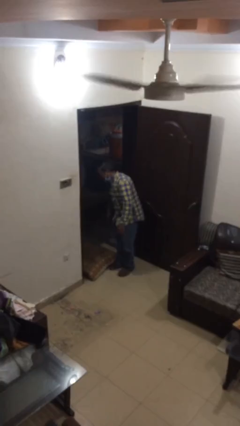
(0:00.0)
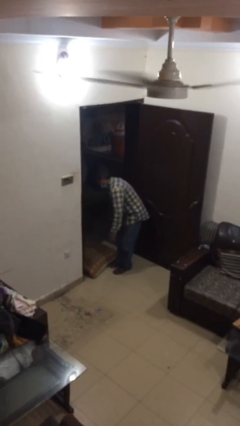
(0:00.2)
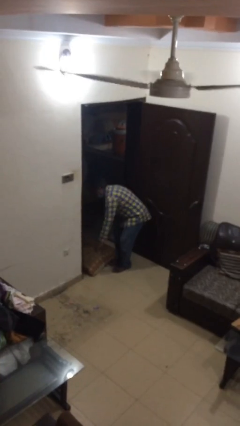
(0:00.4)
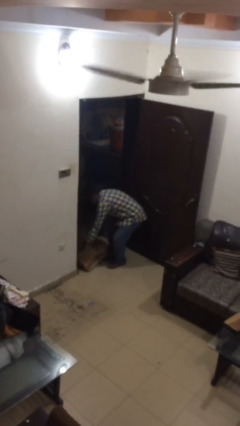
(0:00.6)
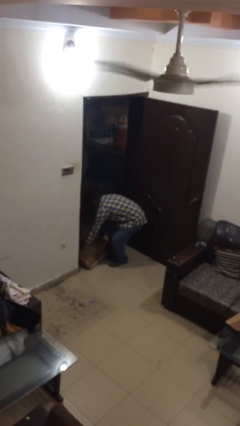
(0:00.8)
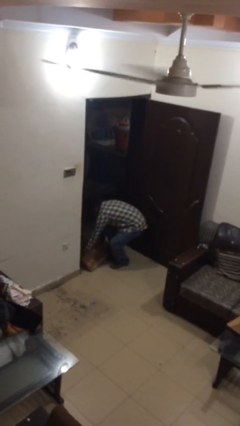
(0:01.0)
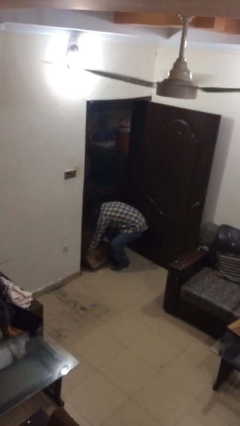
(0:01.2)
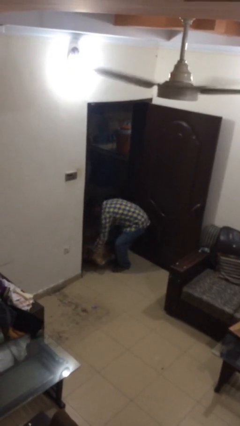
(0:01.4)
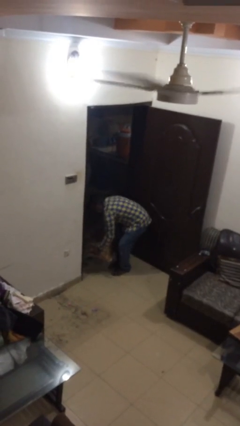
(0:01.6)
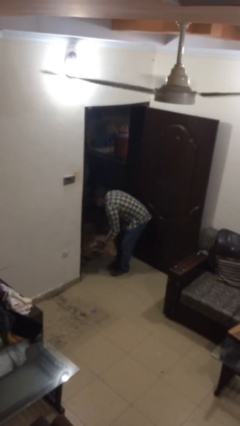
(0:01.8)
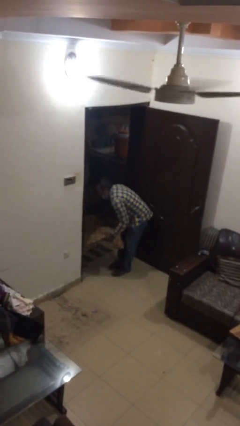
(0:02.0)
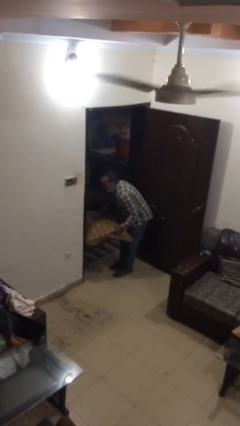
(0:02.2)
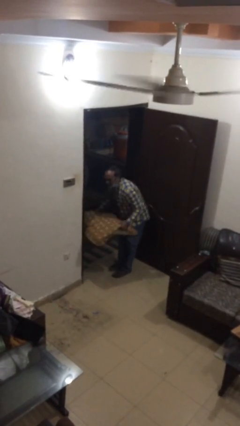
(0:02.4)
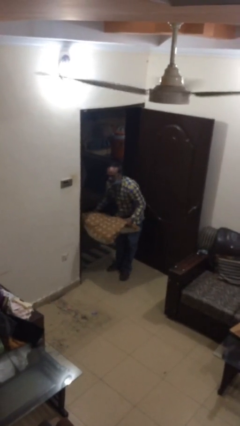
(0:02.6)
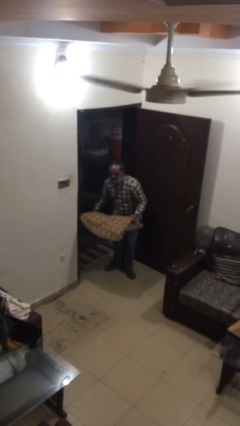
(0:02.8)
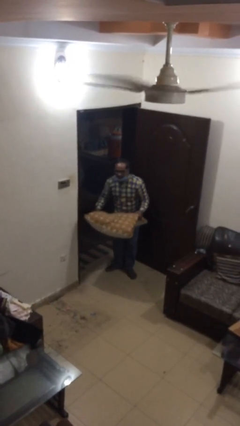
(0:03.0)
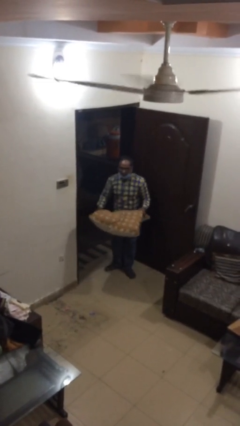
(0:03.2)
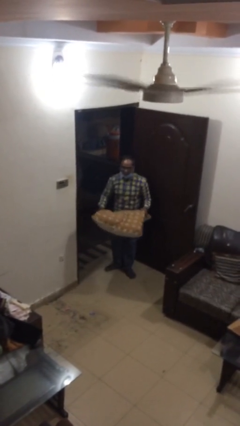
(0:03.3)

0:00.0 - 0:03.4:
person picks up object from floor

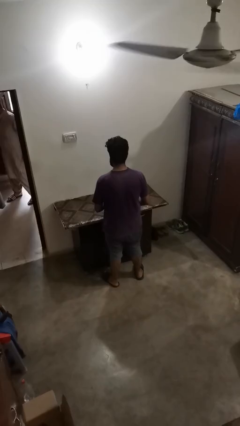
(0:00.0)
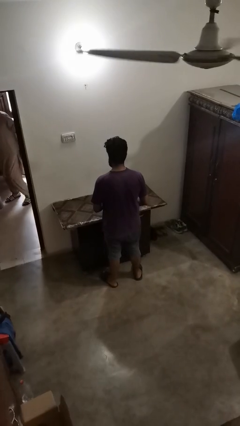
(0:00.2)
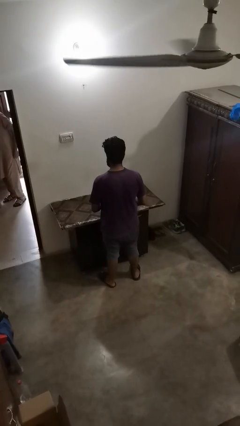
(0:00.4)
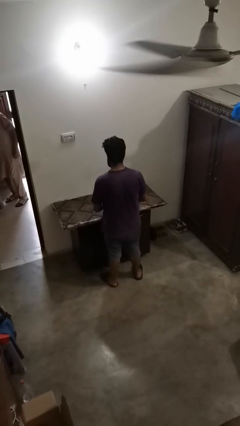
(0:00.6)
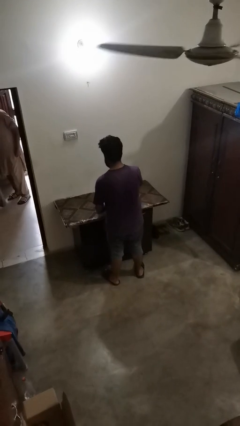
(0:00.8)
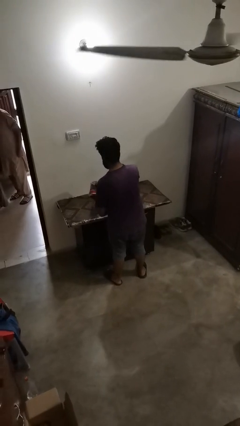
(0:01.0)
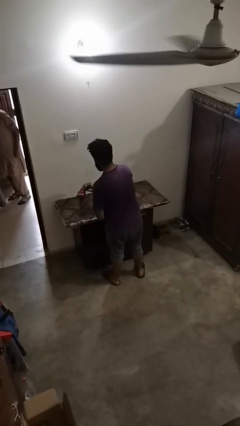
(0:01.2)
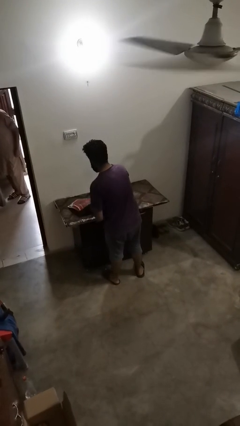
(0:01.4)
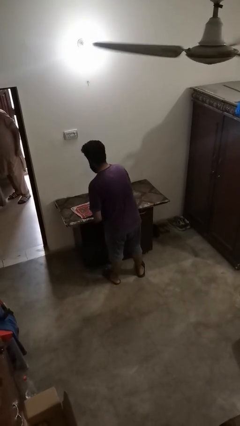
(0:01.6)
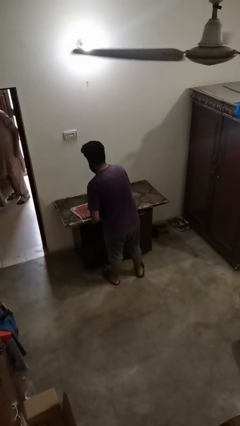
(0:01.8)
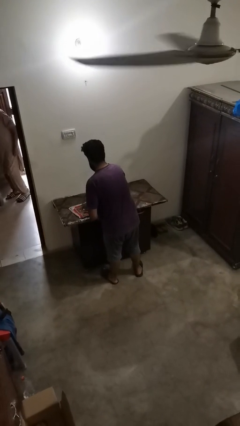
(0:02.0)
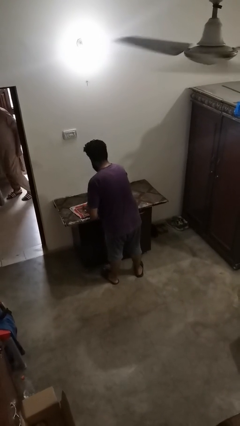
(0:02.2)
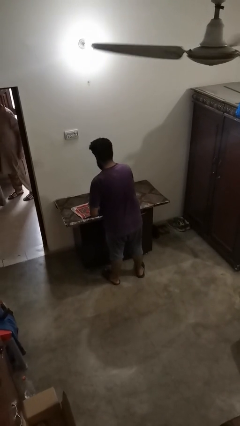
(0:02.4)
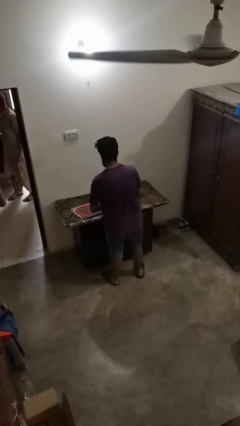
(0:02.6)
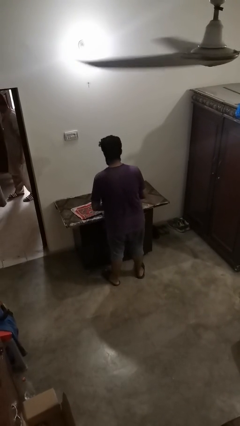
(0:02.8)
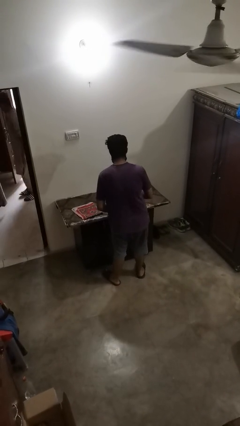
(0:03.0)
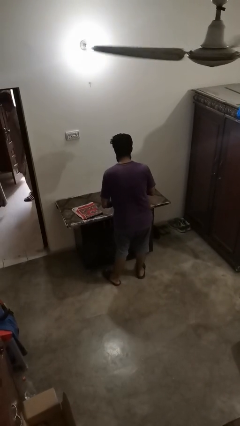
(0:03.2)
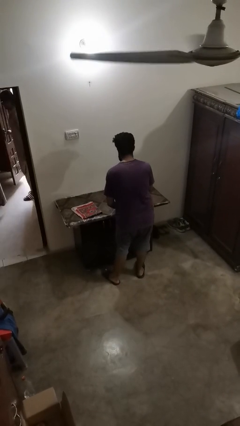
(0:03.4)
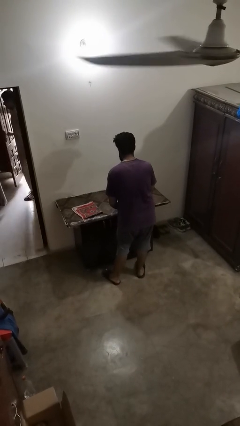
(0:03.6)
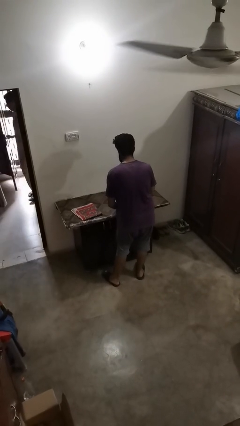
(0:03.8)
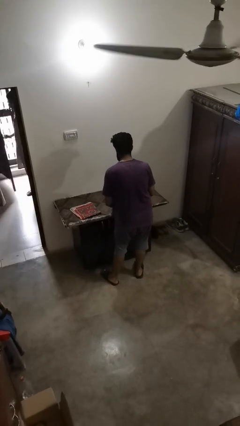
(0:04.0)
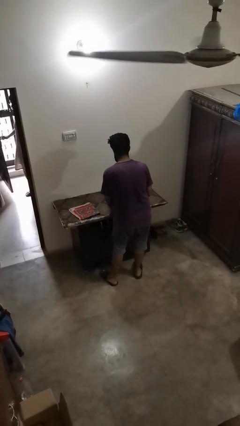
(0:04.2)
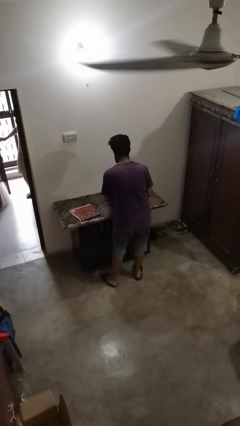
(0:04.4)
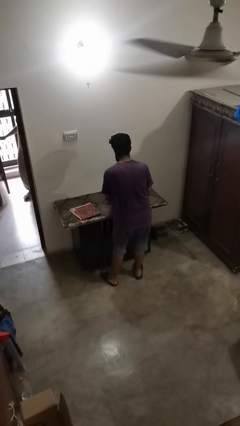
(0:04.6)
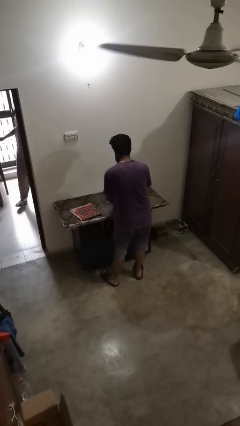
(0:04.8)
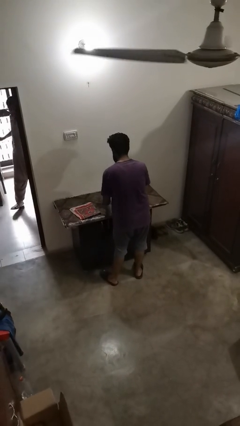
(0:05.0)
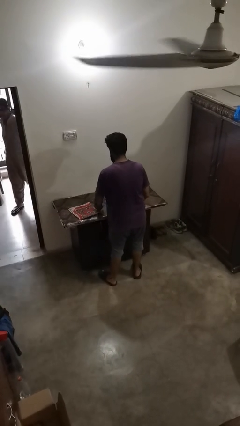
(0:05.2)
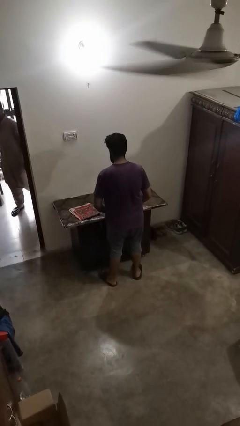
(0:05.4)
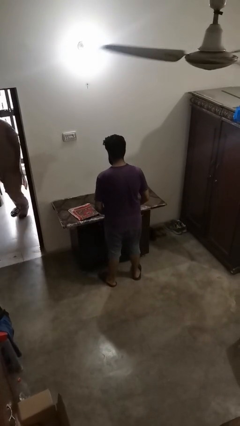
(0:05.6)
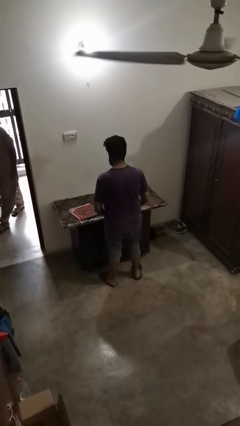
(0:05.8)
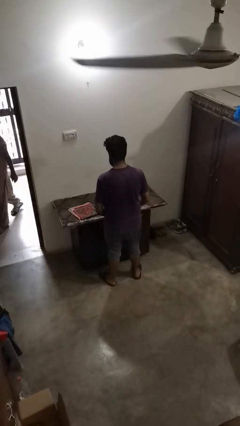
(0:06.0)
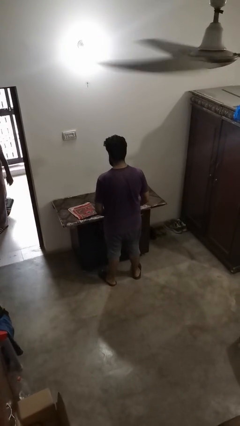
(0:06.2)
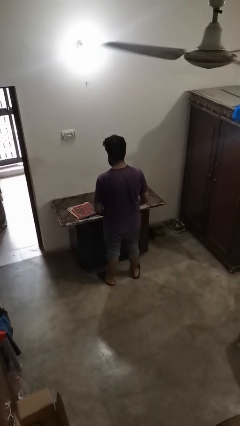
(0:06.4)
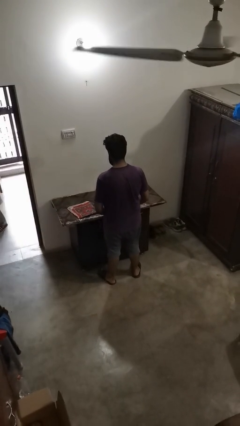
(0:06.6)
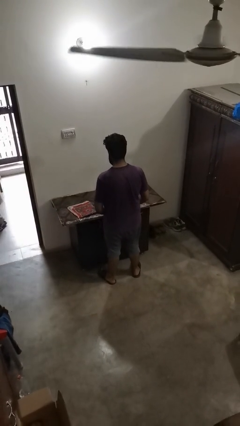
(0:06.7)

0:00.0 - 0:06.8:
person spreads tablecloth

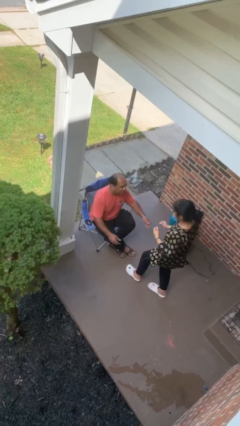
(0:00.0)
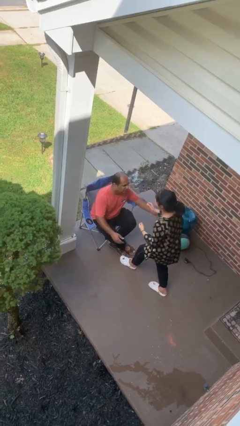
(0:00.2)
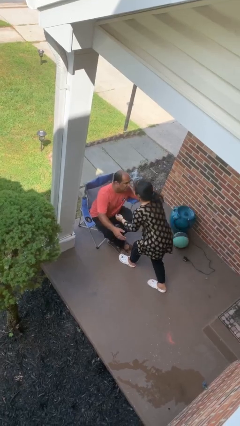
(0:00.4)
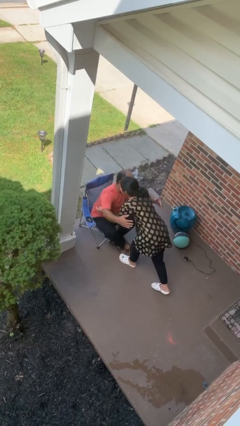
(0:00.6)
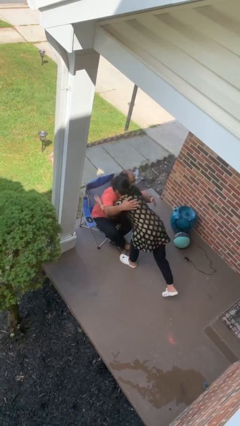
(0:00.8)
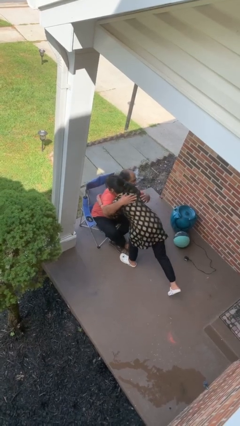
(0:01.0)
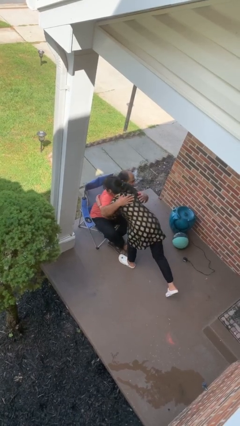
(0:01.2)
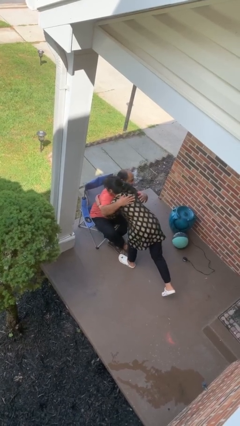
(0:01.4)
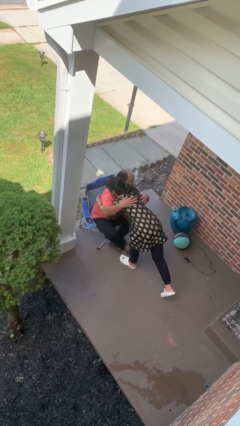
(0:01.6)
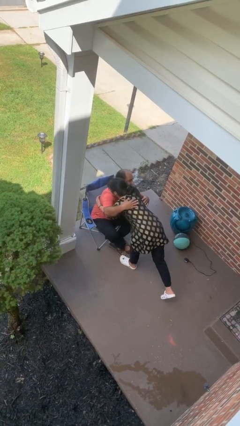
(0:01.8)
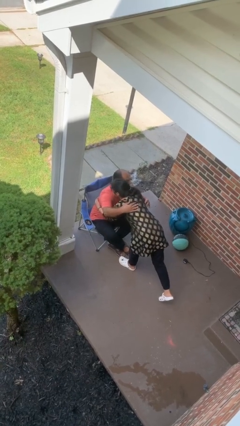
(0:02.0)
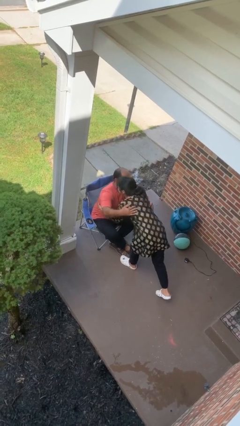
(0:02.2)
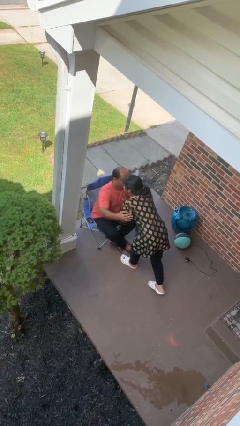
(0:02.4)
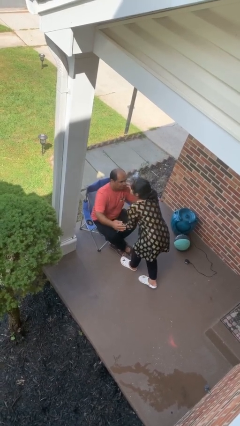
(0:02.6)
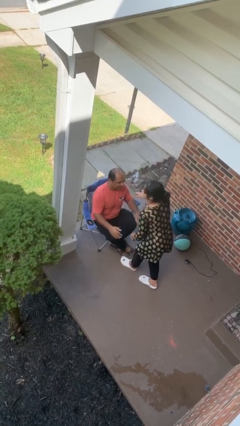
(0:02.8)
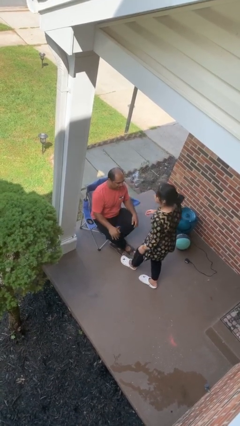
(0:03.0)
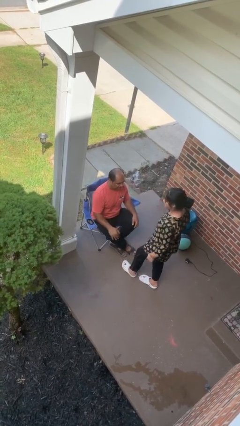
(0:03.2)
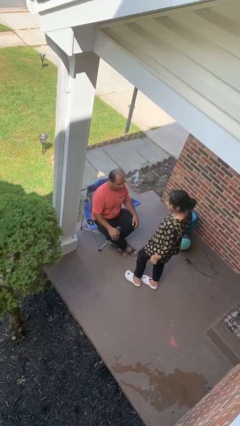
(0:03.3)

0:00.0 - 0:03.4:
person embraces person

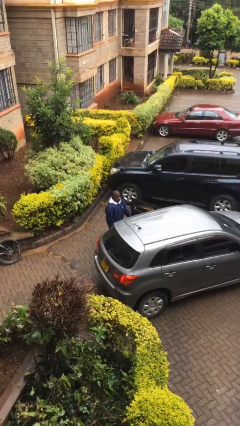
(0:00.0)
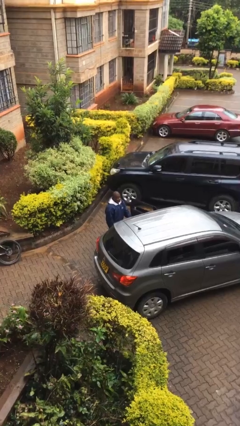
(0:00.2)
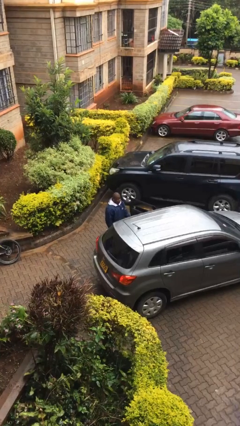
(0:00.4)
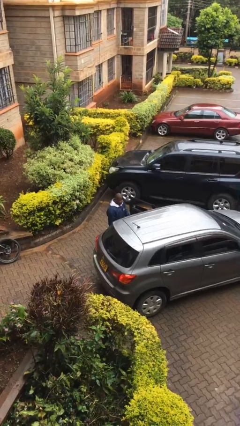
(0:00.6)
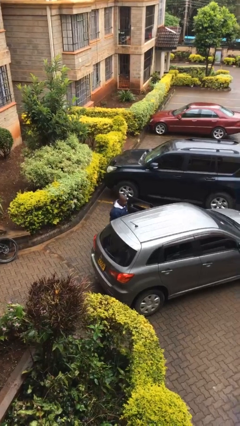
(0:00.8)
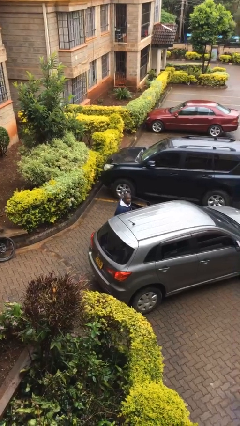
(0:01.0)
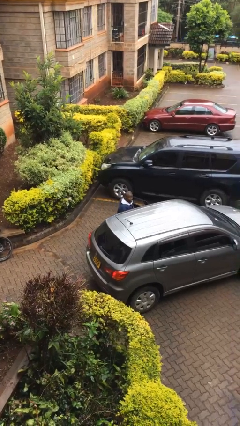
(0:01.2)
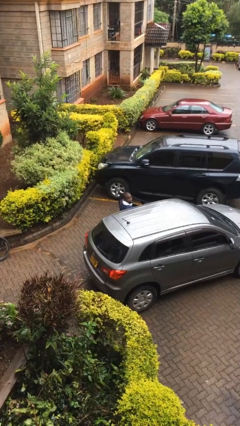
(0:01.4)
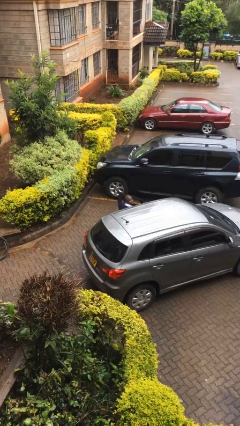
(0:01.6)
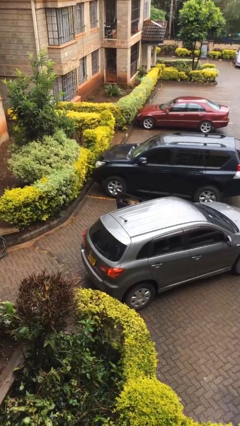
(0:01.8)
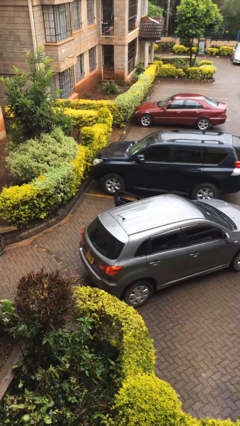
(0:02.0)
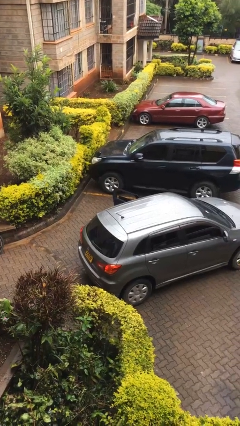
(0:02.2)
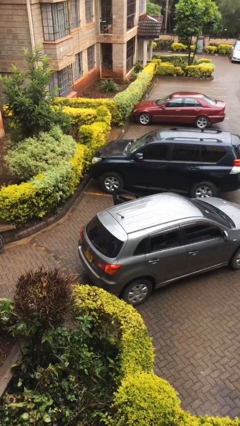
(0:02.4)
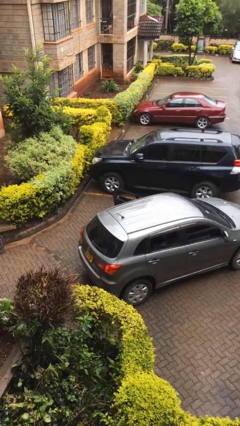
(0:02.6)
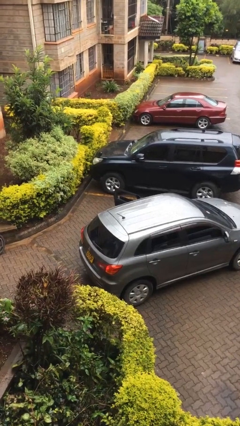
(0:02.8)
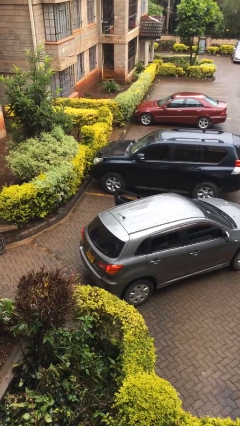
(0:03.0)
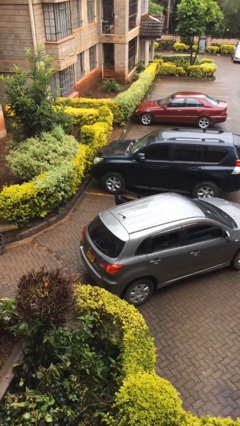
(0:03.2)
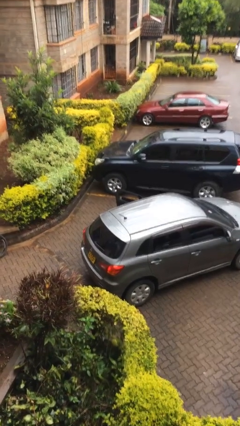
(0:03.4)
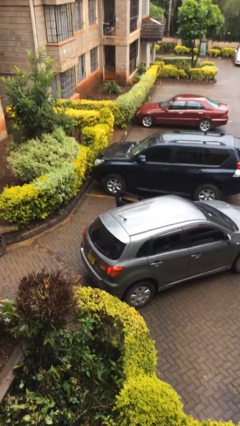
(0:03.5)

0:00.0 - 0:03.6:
person enters car

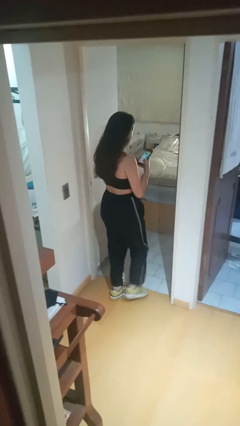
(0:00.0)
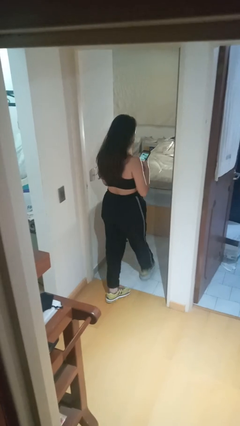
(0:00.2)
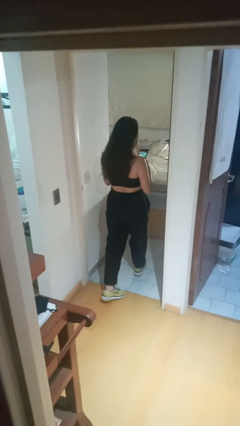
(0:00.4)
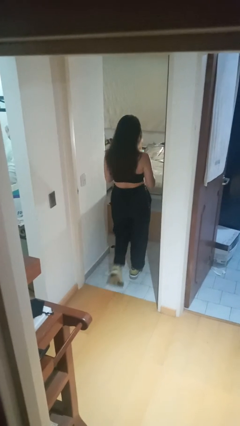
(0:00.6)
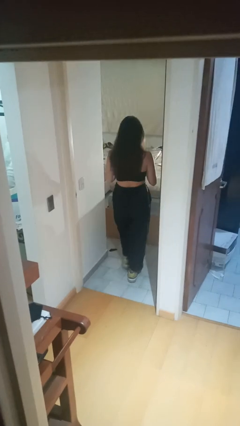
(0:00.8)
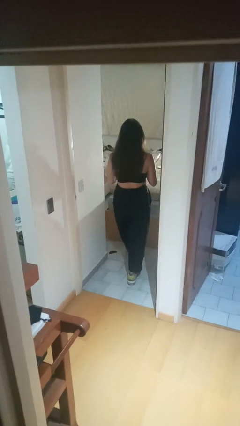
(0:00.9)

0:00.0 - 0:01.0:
person exits scene through structure
